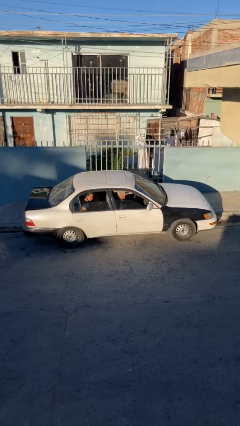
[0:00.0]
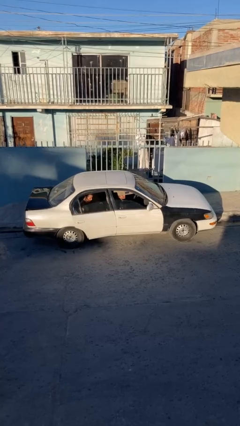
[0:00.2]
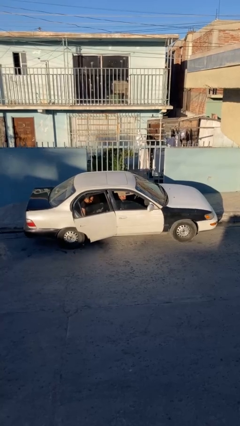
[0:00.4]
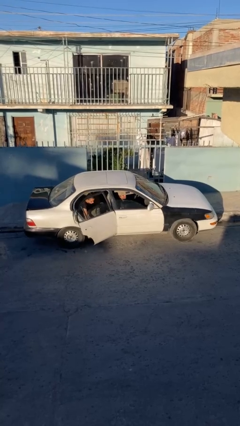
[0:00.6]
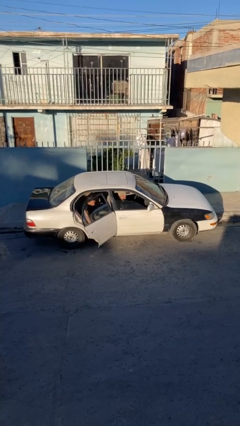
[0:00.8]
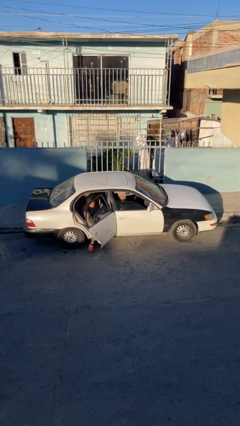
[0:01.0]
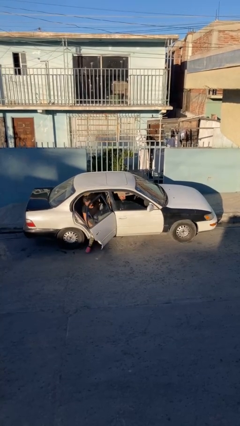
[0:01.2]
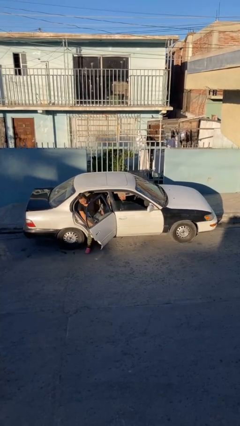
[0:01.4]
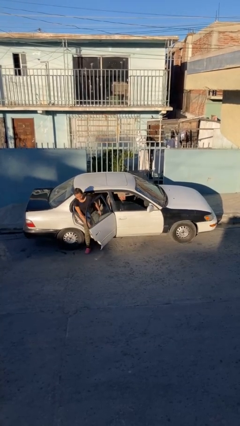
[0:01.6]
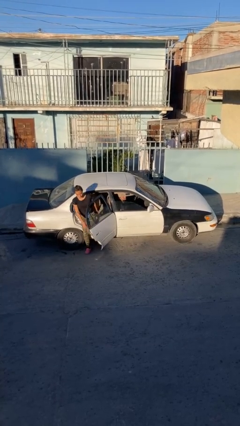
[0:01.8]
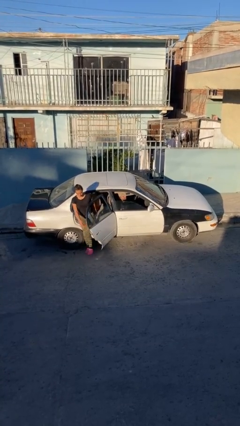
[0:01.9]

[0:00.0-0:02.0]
car drops off person

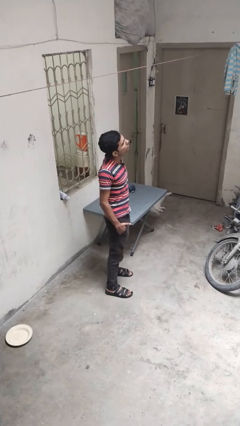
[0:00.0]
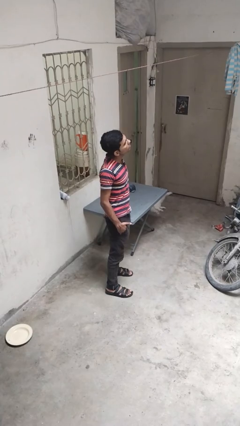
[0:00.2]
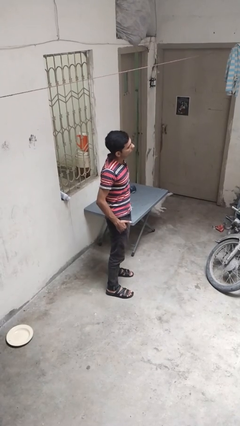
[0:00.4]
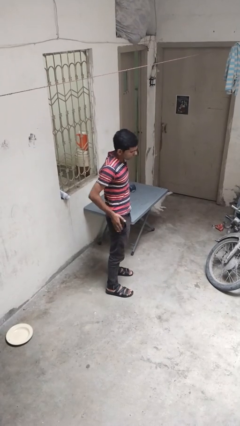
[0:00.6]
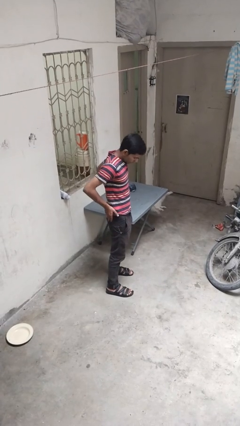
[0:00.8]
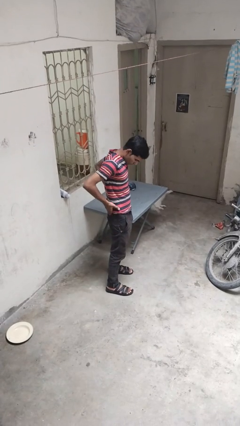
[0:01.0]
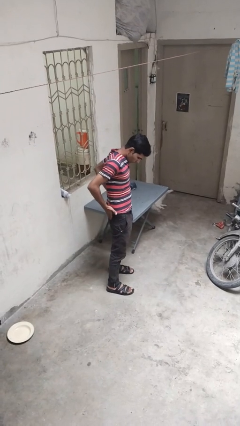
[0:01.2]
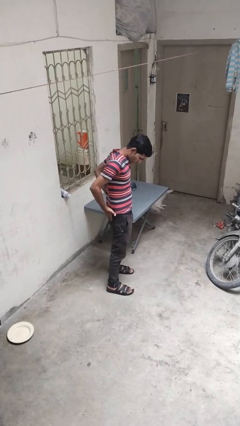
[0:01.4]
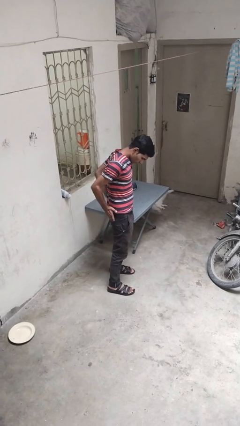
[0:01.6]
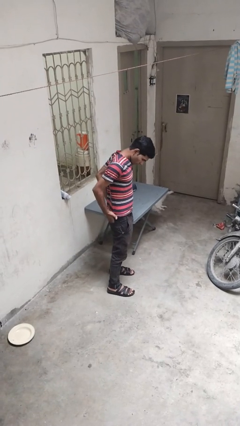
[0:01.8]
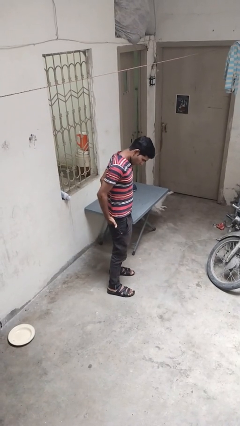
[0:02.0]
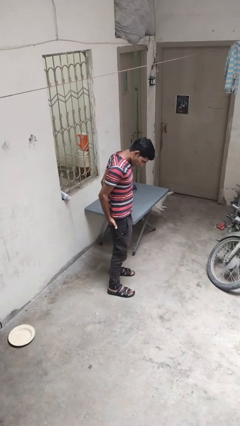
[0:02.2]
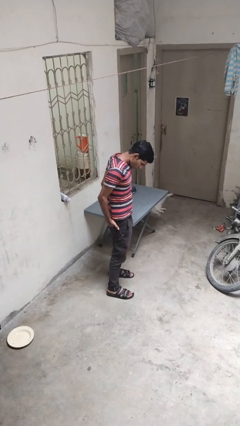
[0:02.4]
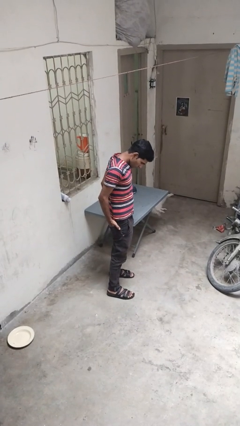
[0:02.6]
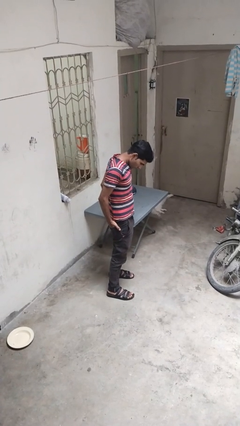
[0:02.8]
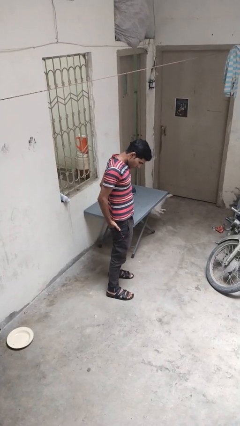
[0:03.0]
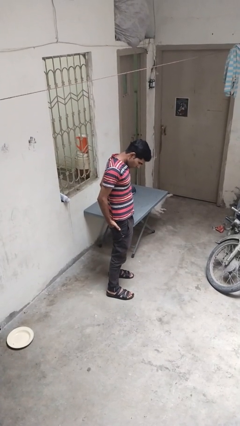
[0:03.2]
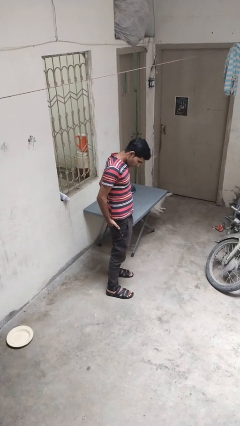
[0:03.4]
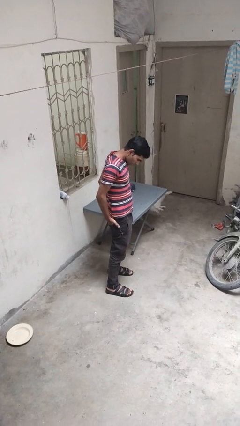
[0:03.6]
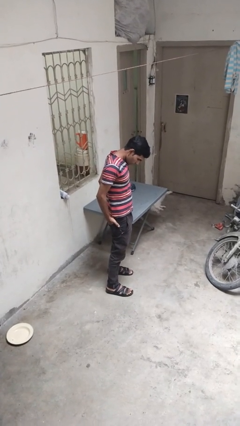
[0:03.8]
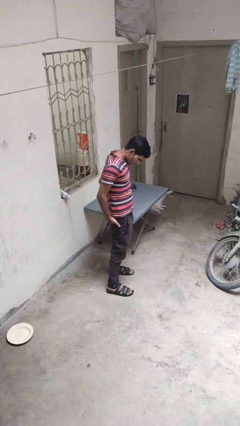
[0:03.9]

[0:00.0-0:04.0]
person puts hands in back pockets

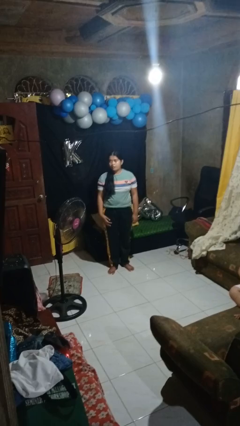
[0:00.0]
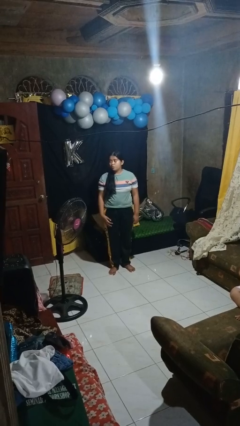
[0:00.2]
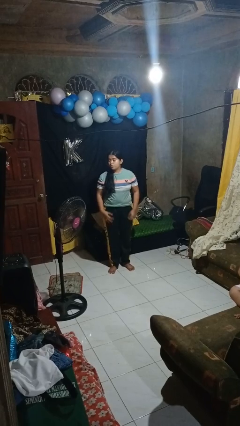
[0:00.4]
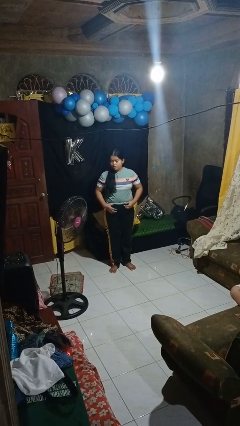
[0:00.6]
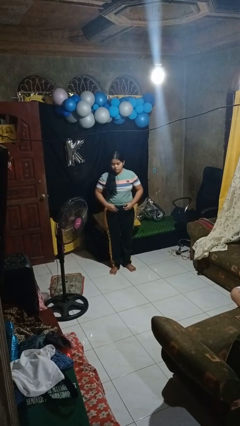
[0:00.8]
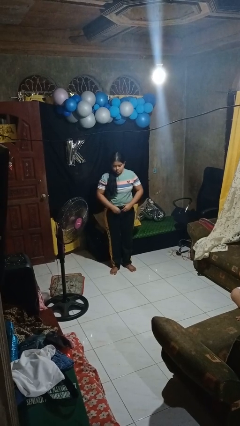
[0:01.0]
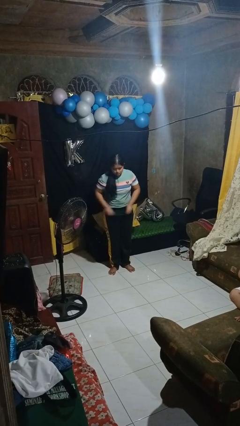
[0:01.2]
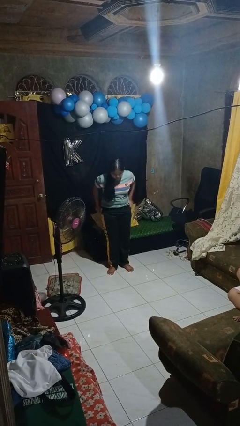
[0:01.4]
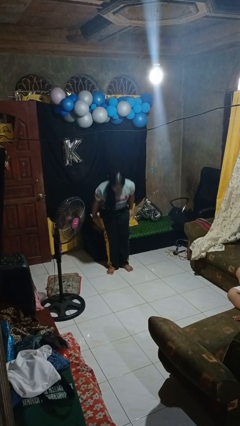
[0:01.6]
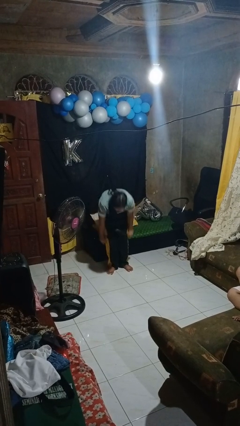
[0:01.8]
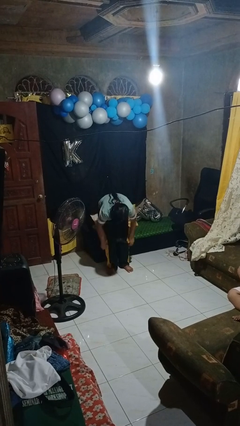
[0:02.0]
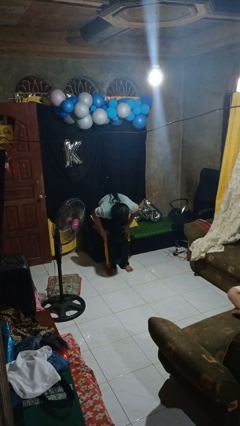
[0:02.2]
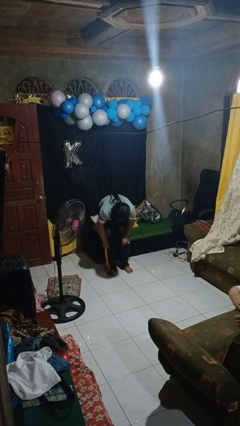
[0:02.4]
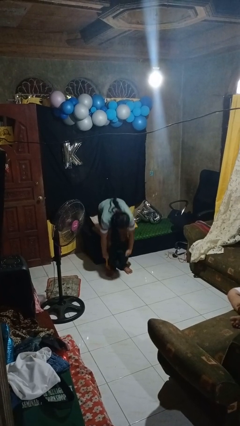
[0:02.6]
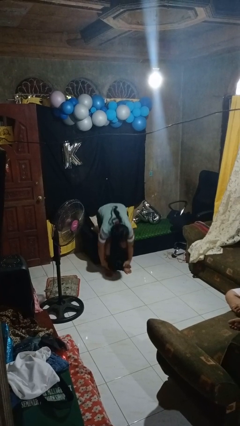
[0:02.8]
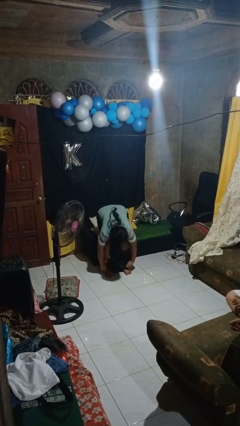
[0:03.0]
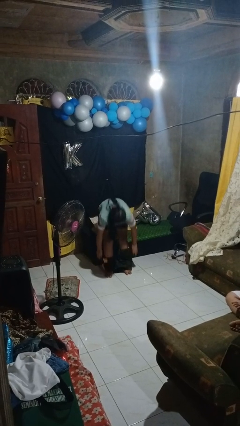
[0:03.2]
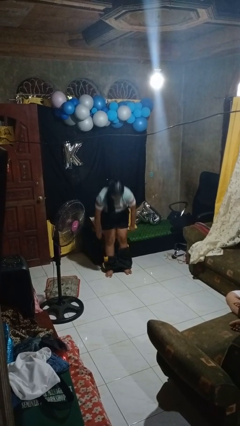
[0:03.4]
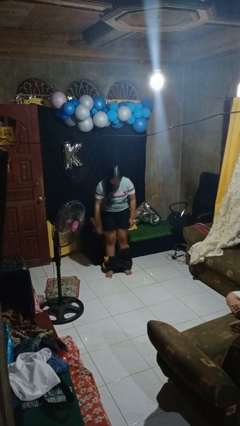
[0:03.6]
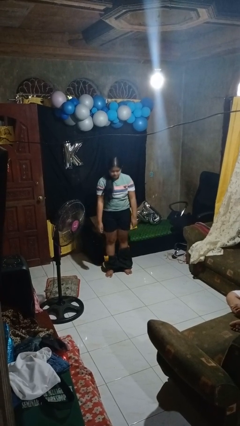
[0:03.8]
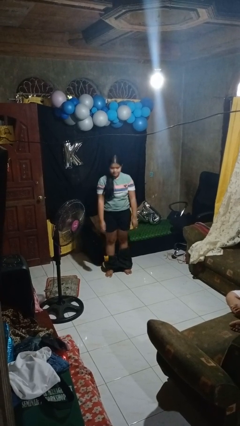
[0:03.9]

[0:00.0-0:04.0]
person takes off pants

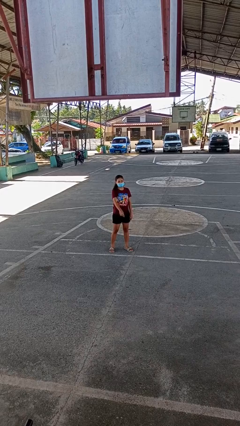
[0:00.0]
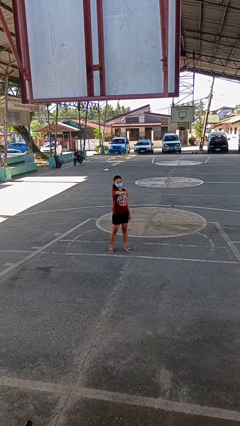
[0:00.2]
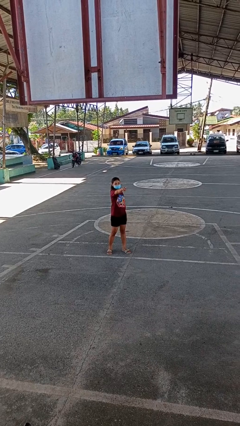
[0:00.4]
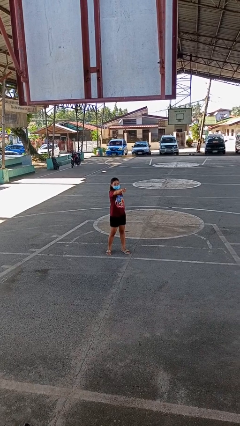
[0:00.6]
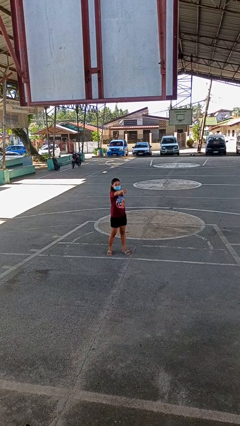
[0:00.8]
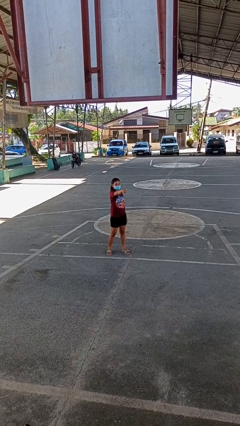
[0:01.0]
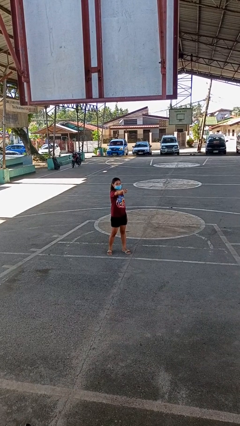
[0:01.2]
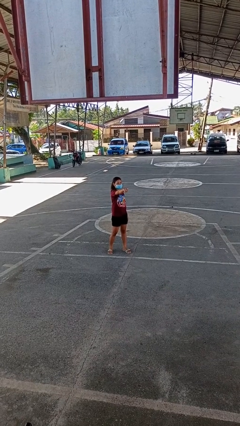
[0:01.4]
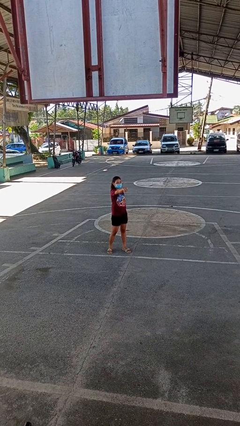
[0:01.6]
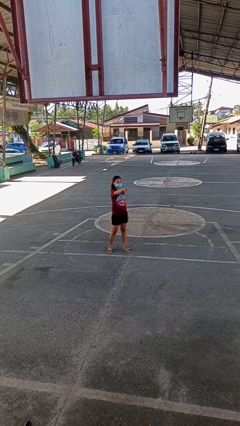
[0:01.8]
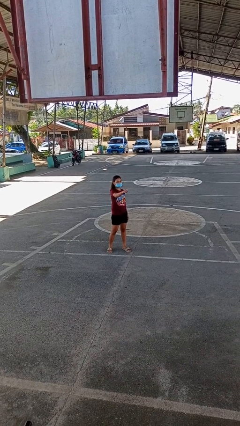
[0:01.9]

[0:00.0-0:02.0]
person points at person

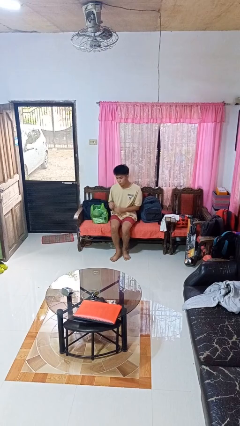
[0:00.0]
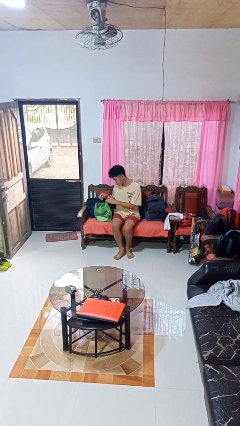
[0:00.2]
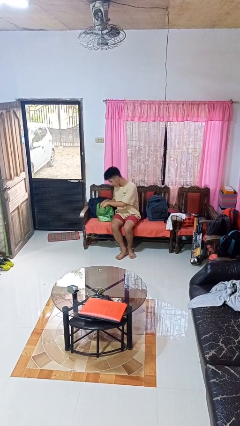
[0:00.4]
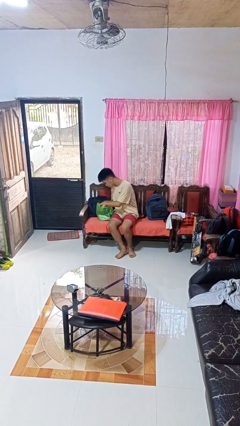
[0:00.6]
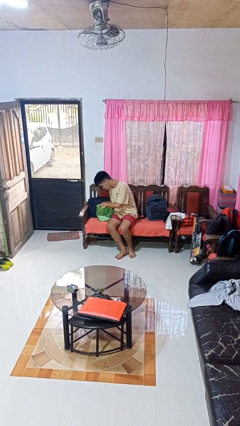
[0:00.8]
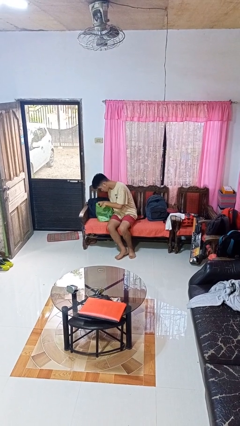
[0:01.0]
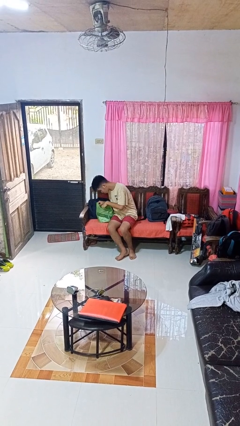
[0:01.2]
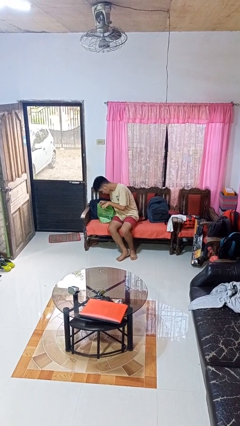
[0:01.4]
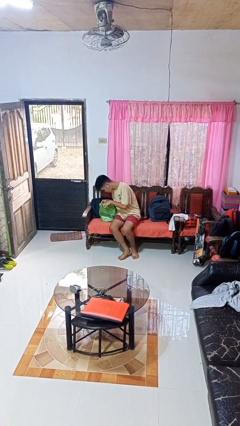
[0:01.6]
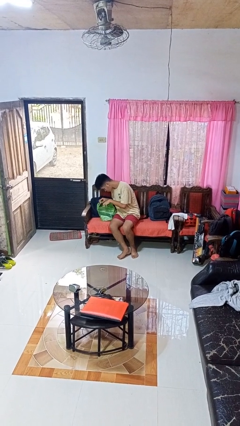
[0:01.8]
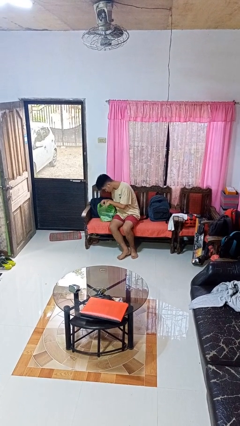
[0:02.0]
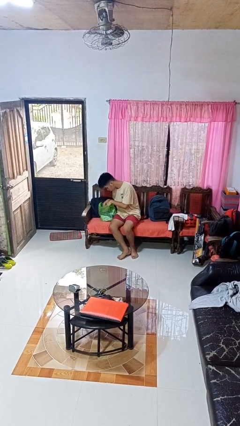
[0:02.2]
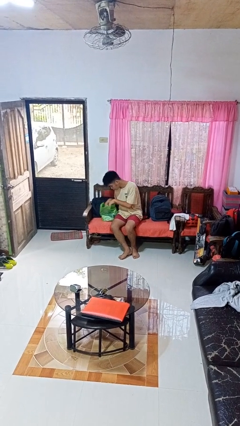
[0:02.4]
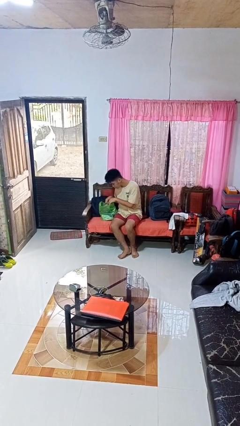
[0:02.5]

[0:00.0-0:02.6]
person searches in bag

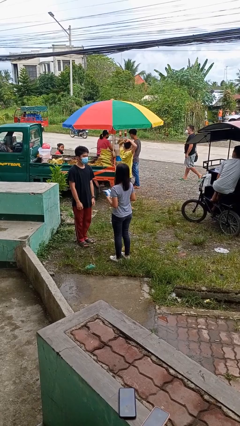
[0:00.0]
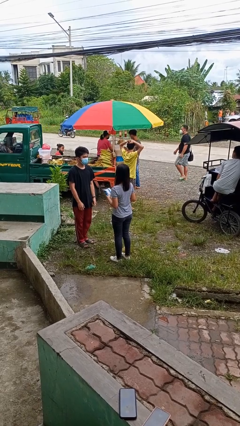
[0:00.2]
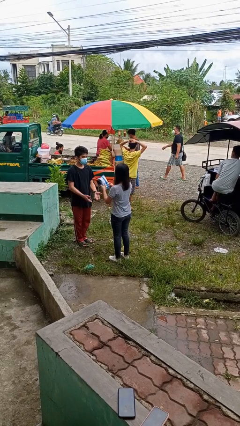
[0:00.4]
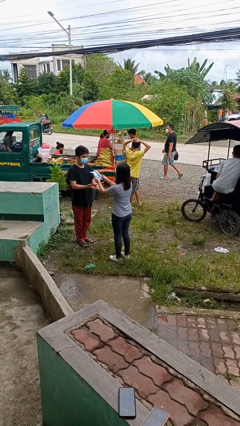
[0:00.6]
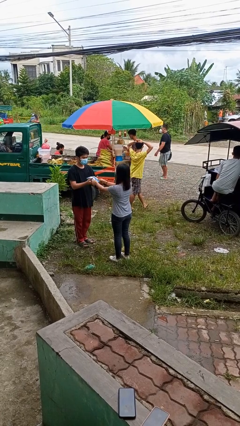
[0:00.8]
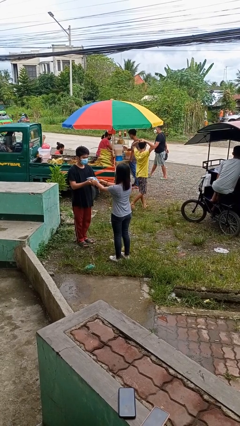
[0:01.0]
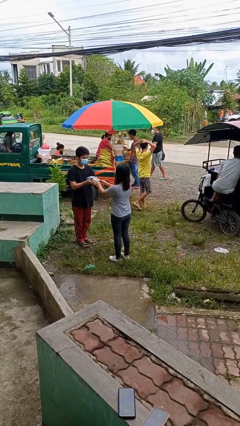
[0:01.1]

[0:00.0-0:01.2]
person transfers object to person

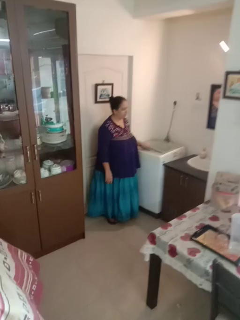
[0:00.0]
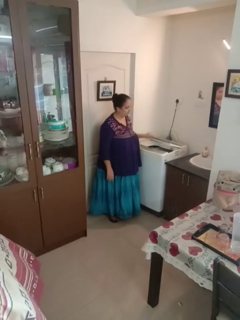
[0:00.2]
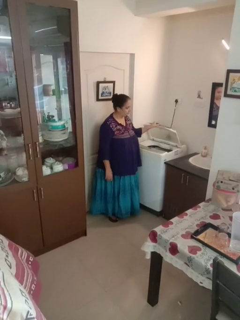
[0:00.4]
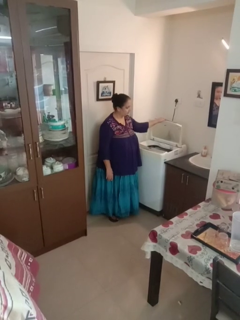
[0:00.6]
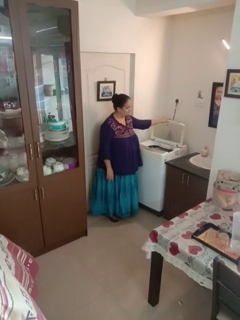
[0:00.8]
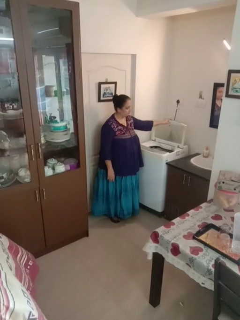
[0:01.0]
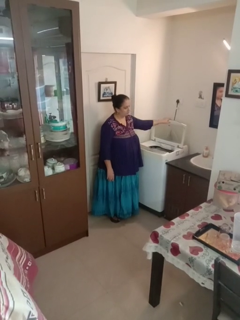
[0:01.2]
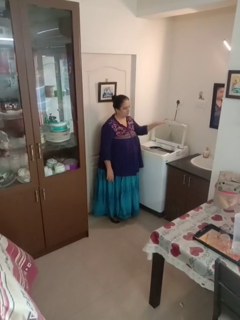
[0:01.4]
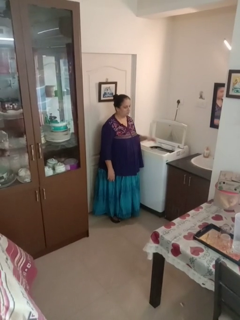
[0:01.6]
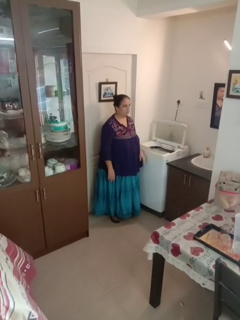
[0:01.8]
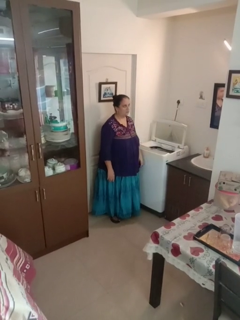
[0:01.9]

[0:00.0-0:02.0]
person opens clothes washer
